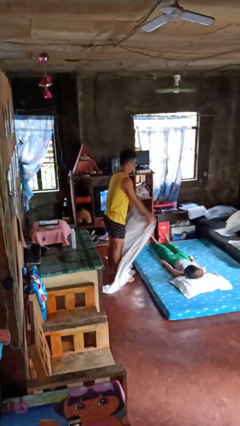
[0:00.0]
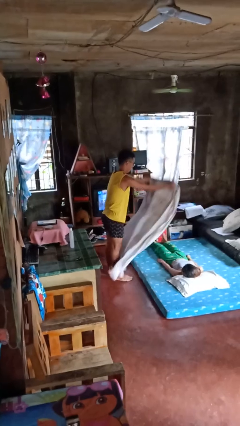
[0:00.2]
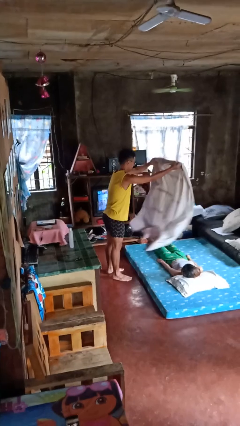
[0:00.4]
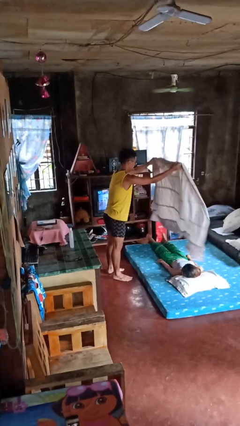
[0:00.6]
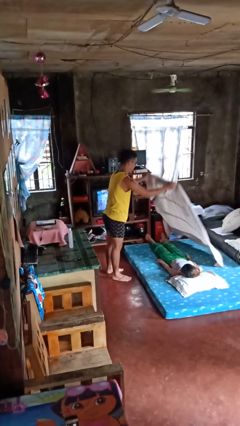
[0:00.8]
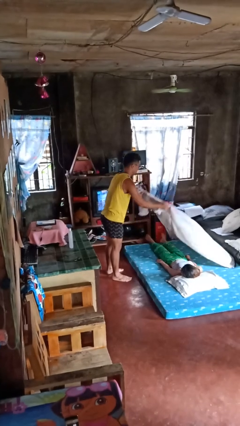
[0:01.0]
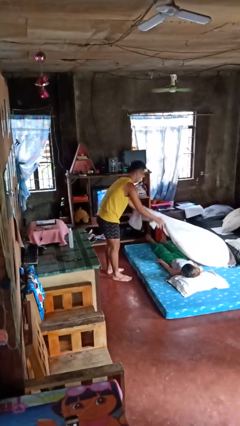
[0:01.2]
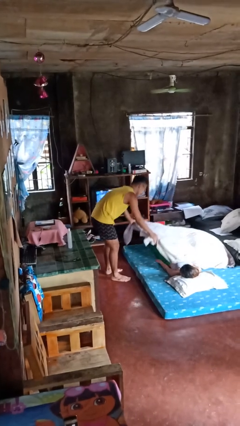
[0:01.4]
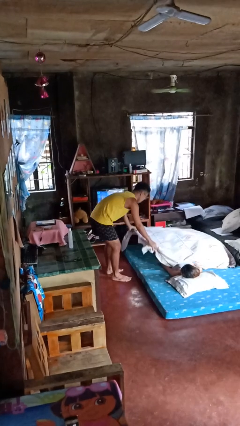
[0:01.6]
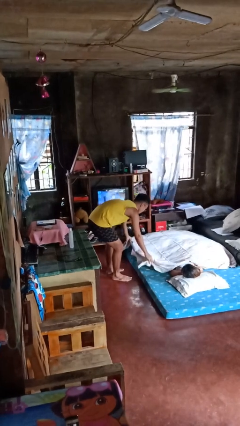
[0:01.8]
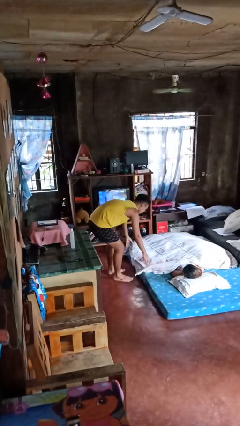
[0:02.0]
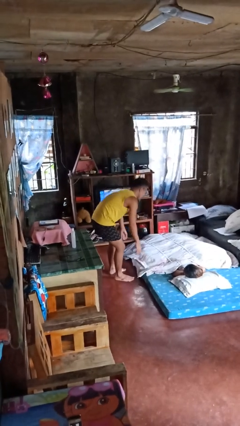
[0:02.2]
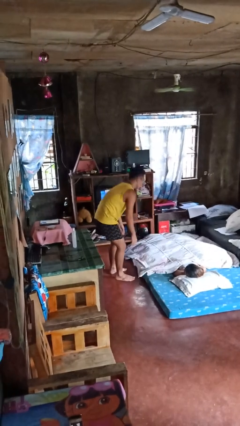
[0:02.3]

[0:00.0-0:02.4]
person covers friend with blanket

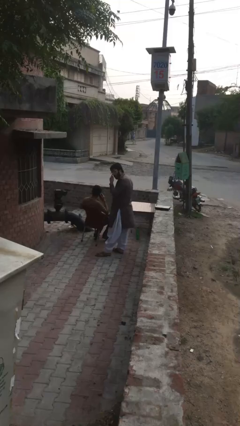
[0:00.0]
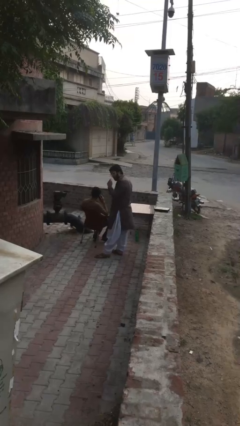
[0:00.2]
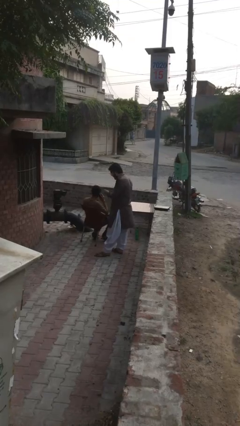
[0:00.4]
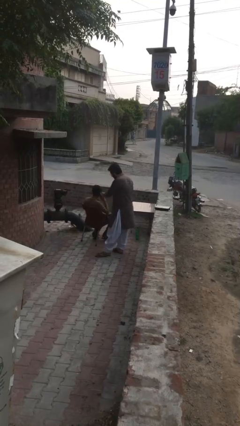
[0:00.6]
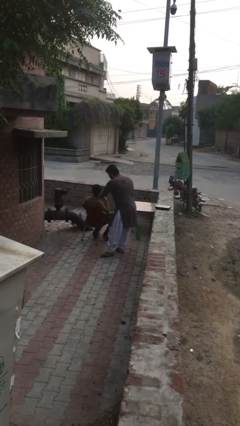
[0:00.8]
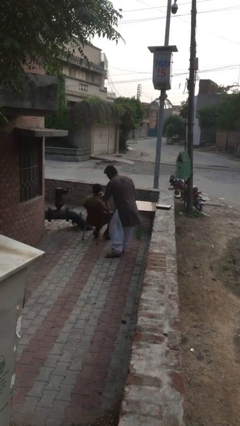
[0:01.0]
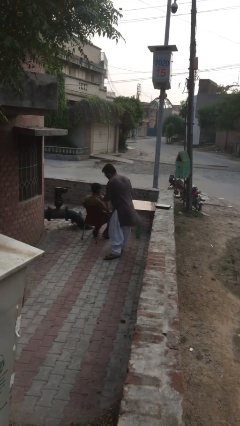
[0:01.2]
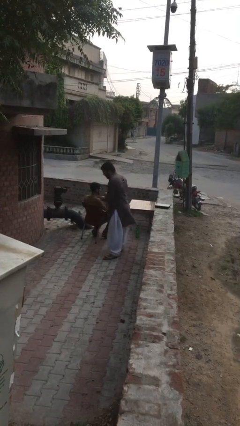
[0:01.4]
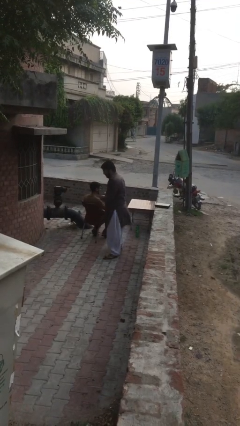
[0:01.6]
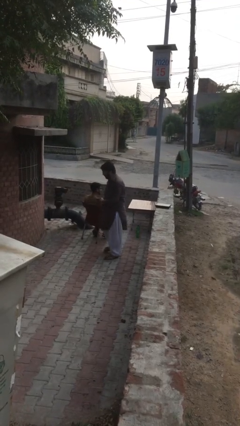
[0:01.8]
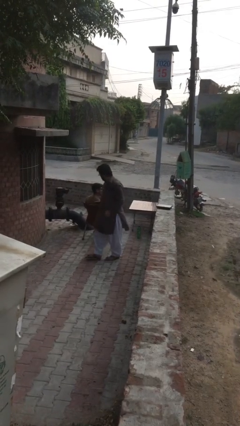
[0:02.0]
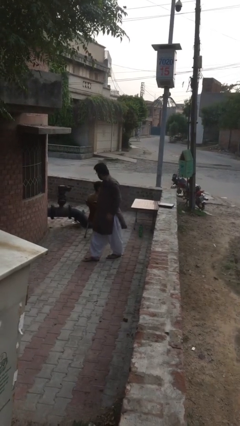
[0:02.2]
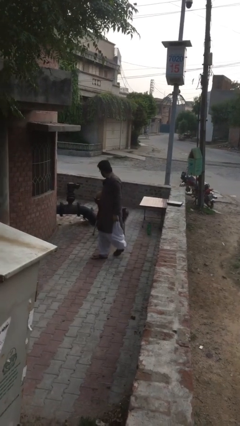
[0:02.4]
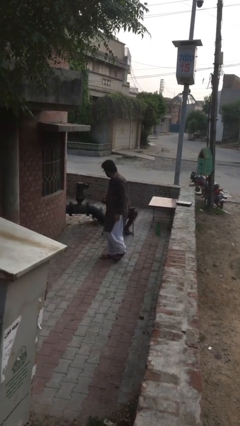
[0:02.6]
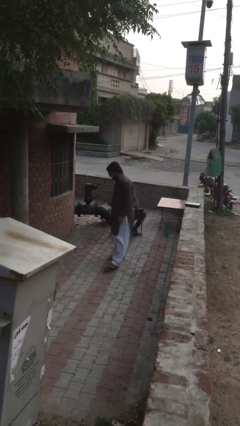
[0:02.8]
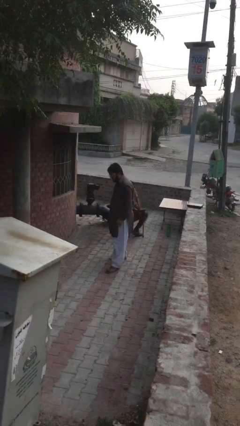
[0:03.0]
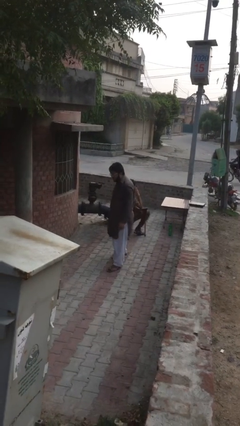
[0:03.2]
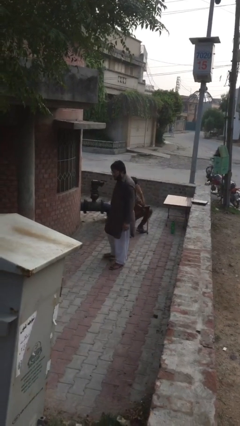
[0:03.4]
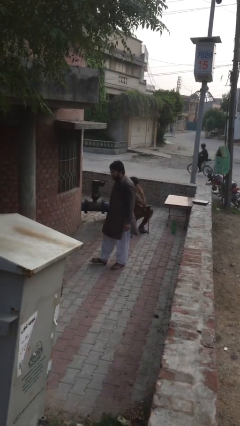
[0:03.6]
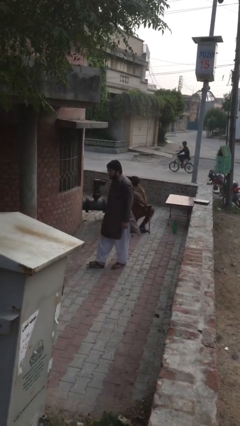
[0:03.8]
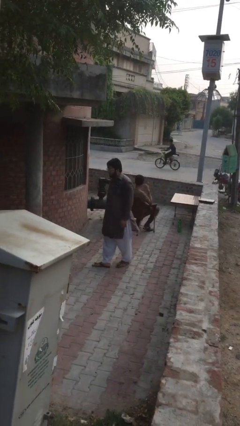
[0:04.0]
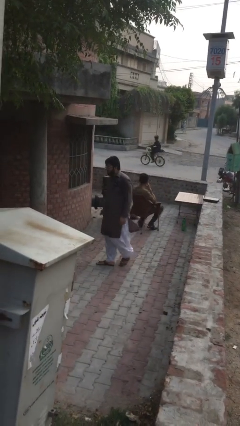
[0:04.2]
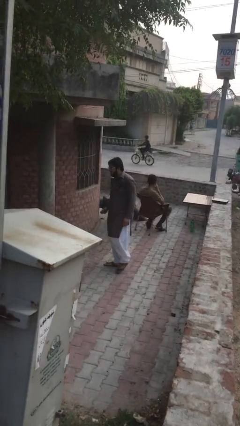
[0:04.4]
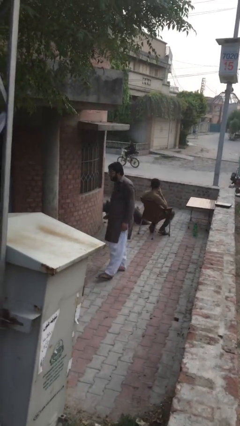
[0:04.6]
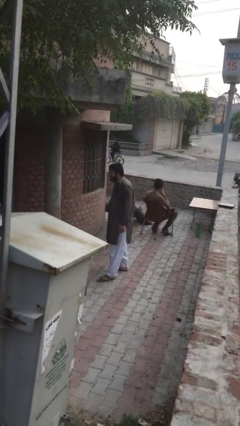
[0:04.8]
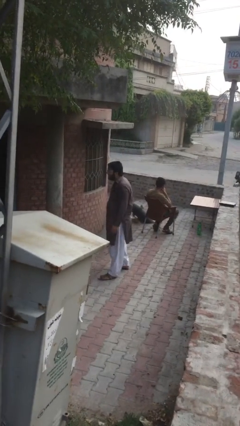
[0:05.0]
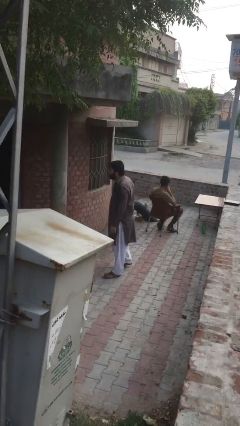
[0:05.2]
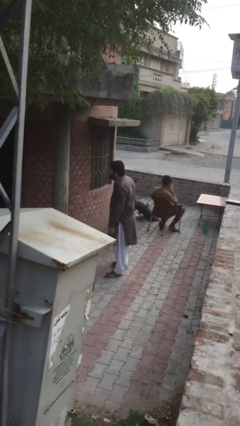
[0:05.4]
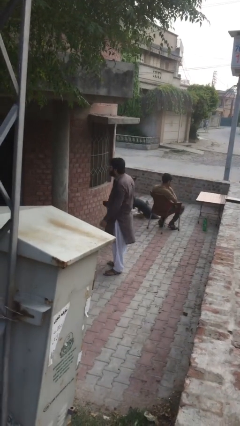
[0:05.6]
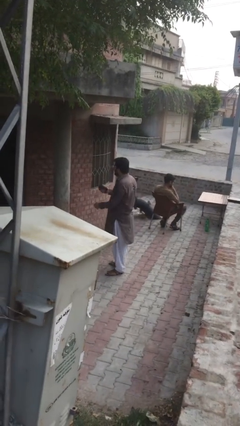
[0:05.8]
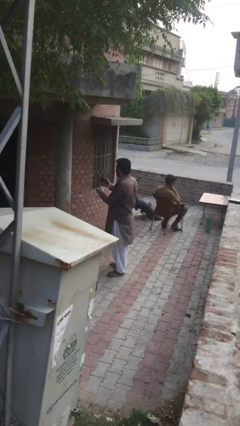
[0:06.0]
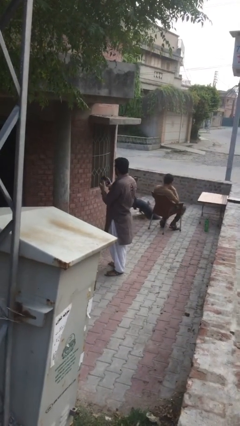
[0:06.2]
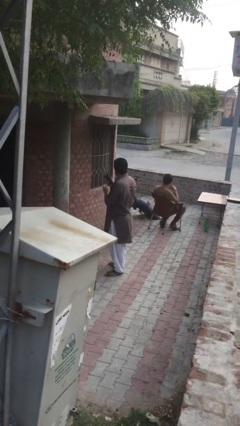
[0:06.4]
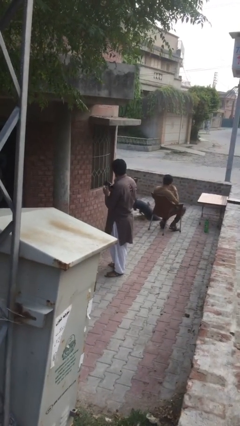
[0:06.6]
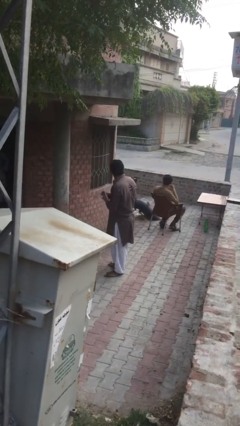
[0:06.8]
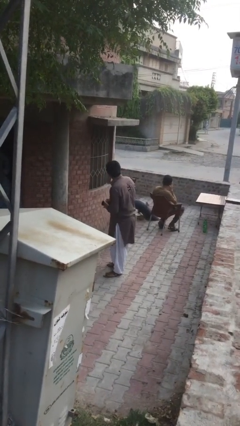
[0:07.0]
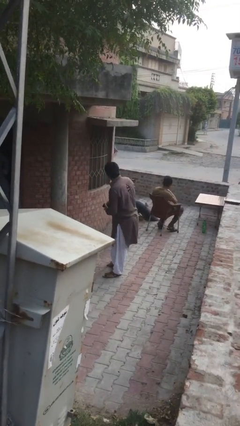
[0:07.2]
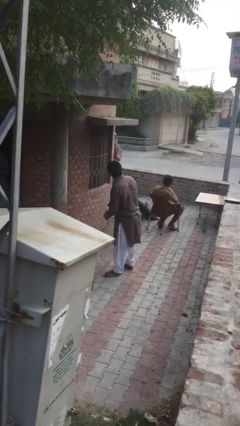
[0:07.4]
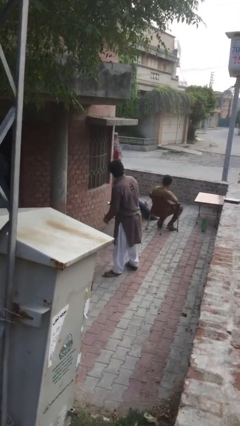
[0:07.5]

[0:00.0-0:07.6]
person steals object from person

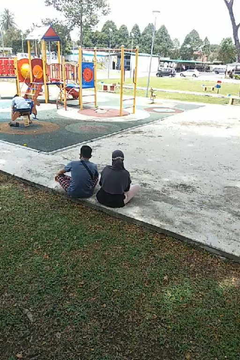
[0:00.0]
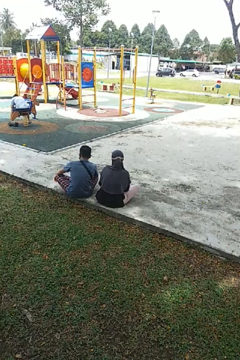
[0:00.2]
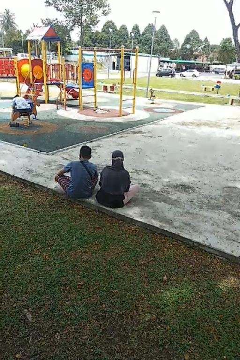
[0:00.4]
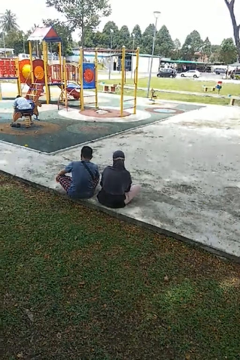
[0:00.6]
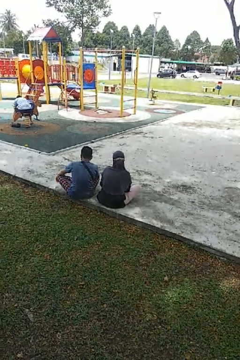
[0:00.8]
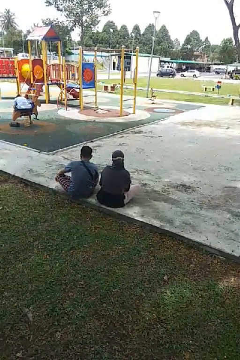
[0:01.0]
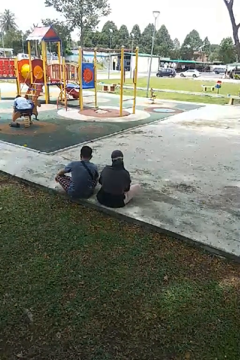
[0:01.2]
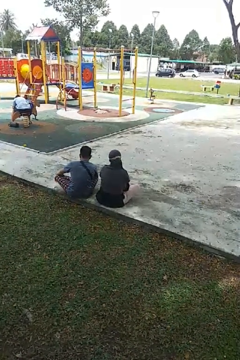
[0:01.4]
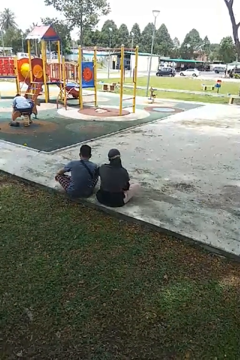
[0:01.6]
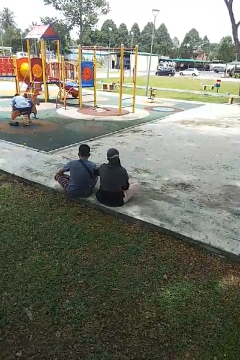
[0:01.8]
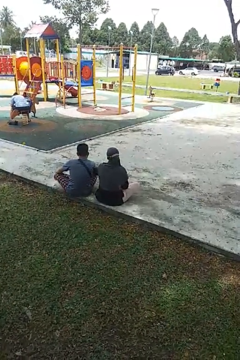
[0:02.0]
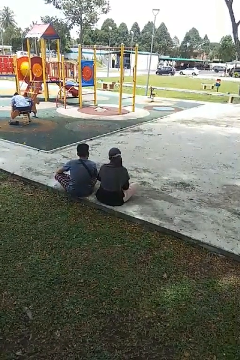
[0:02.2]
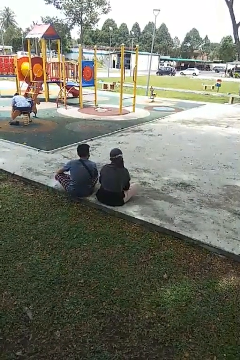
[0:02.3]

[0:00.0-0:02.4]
person nudges person with elbow

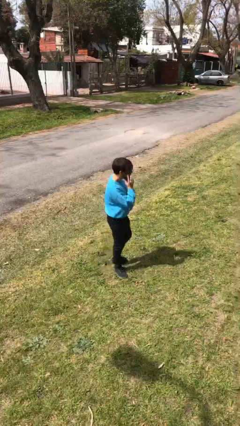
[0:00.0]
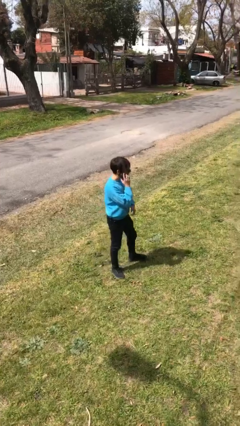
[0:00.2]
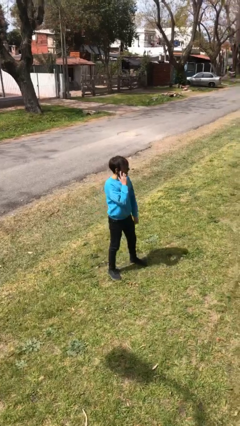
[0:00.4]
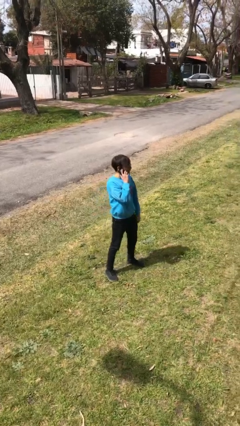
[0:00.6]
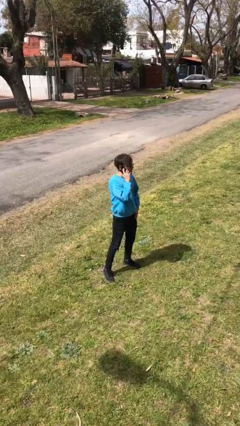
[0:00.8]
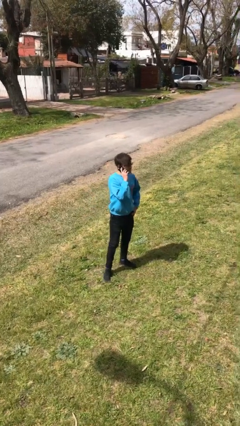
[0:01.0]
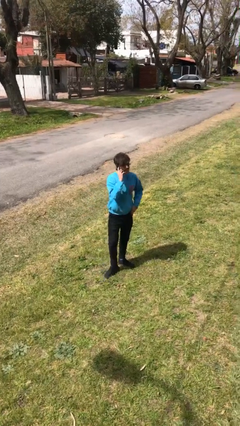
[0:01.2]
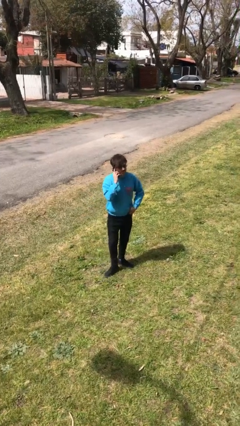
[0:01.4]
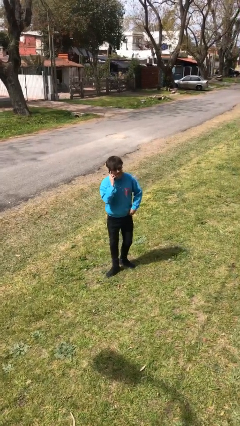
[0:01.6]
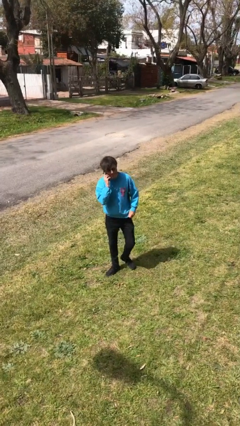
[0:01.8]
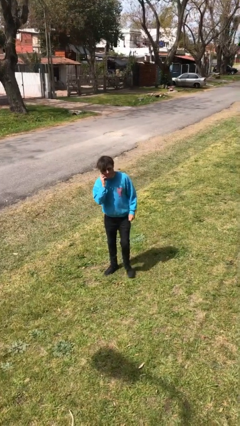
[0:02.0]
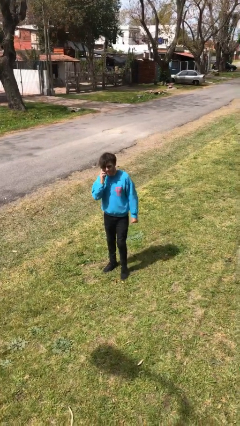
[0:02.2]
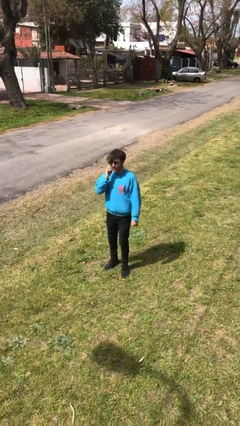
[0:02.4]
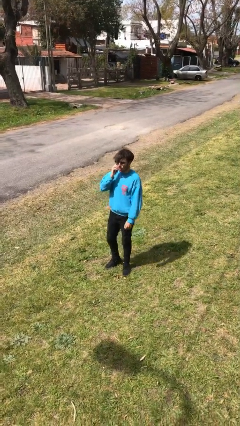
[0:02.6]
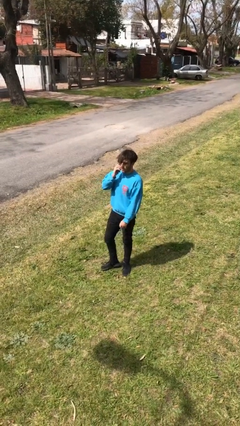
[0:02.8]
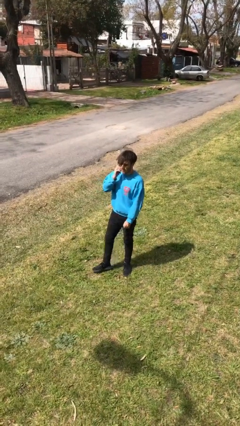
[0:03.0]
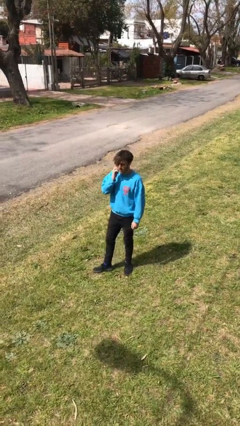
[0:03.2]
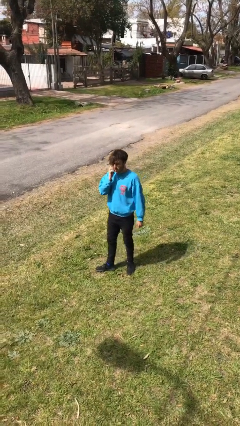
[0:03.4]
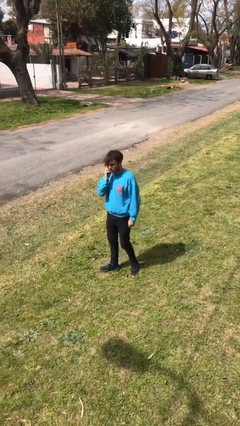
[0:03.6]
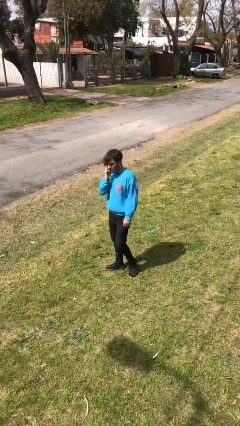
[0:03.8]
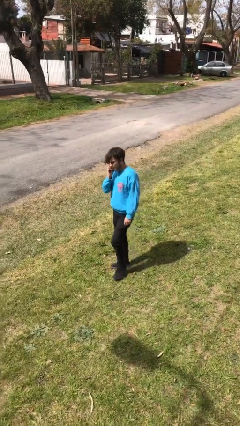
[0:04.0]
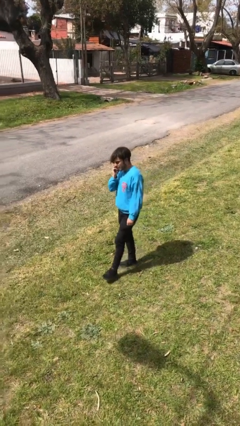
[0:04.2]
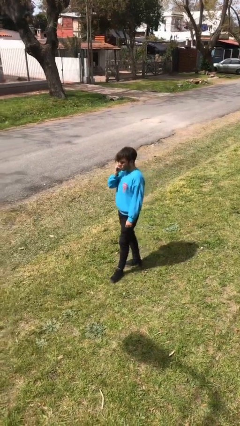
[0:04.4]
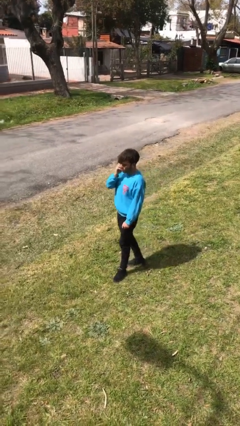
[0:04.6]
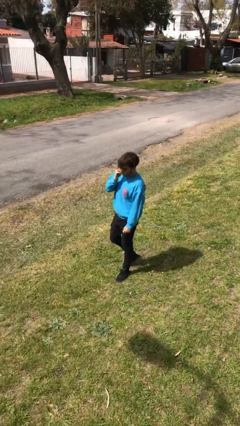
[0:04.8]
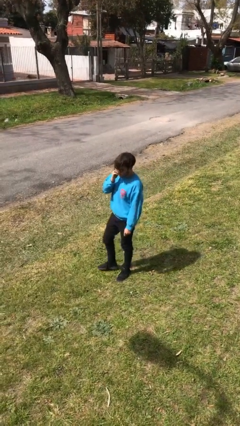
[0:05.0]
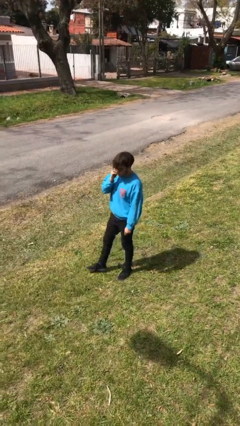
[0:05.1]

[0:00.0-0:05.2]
person talks on phone

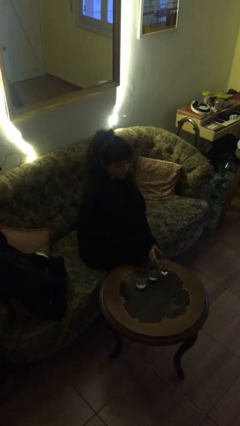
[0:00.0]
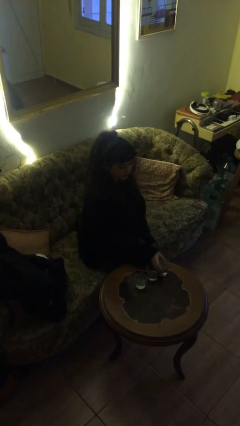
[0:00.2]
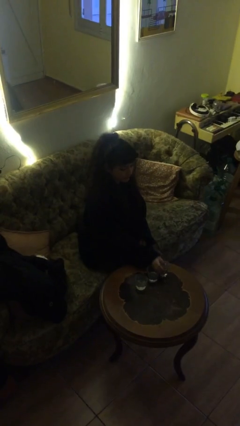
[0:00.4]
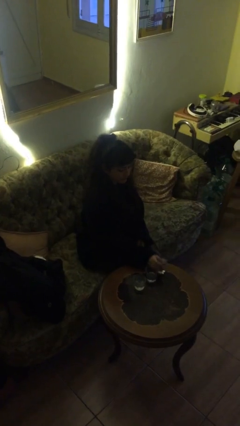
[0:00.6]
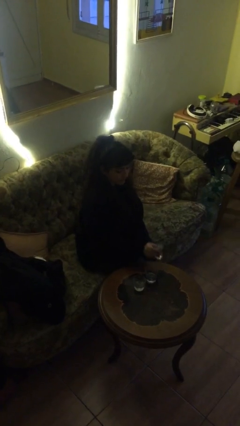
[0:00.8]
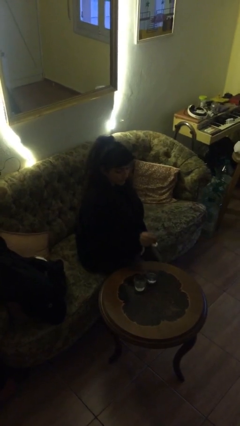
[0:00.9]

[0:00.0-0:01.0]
person picks up object from table
